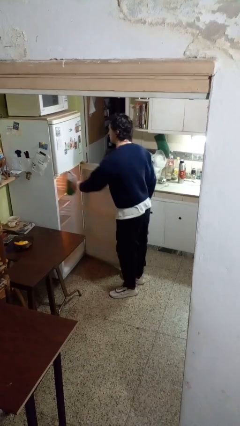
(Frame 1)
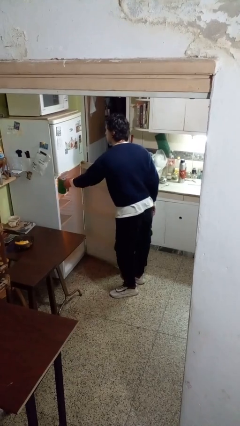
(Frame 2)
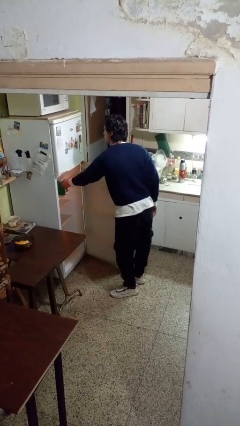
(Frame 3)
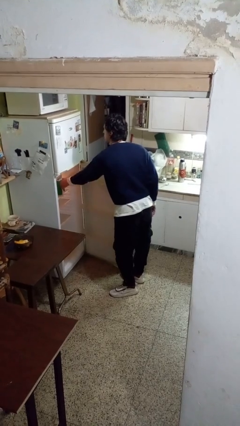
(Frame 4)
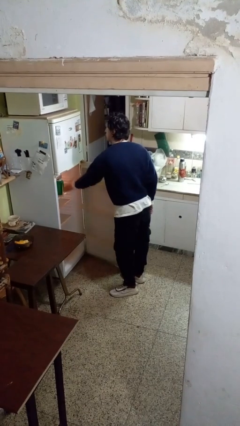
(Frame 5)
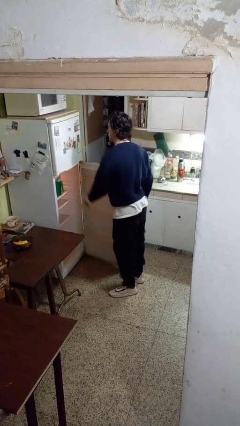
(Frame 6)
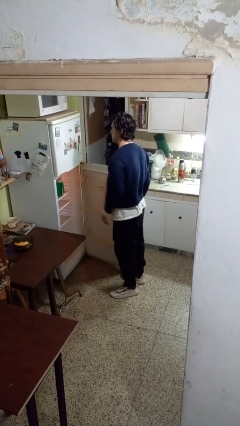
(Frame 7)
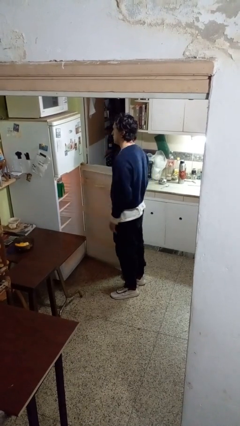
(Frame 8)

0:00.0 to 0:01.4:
person puts object into refrigerator

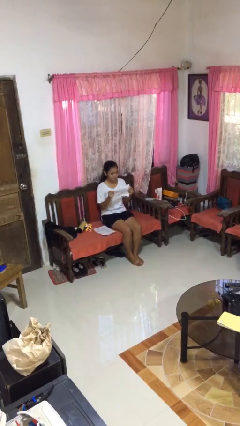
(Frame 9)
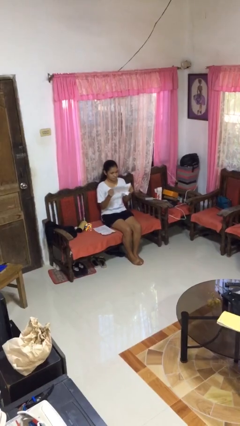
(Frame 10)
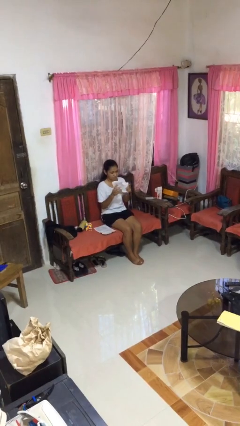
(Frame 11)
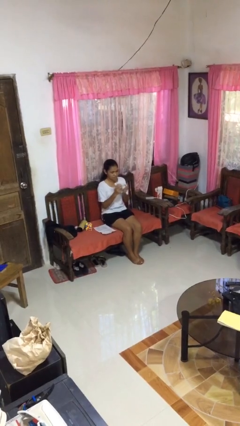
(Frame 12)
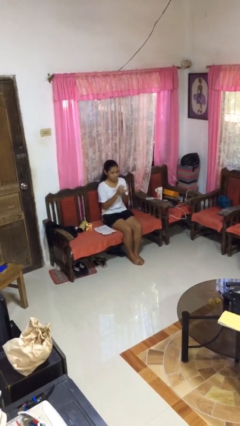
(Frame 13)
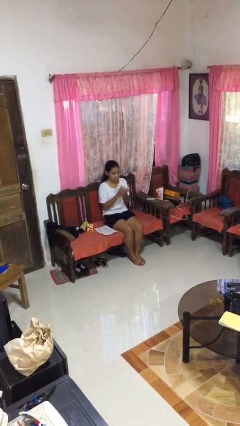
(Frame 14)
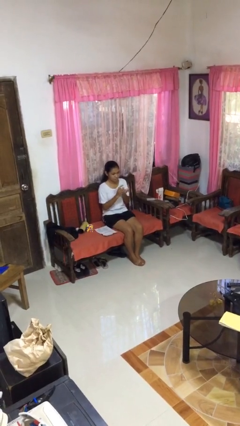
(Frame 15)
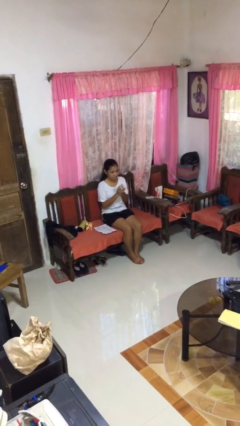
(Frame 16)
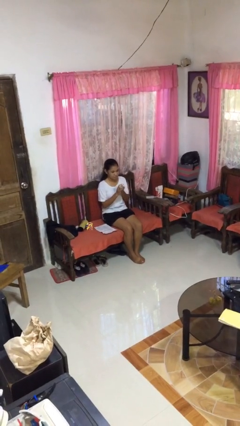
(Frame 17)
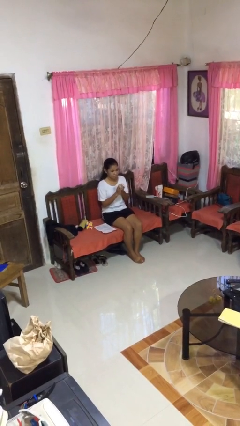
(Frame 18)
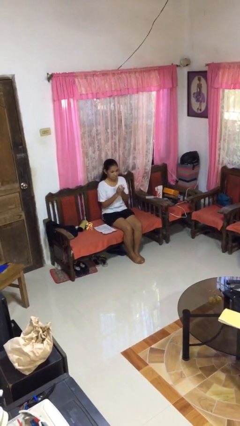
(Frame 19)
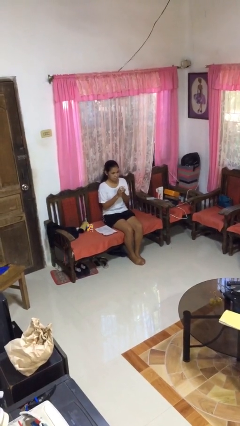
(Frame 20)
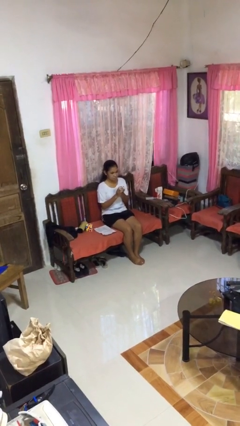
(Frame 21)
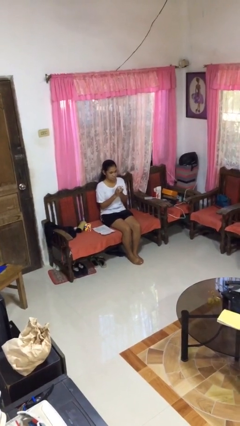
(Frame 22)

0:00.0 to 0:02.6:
person crumples paper

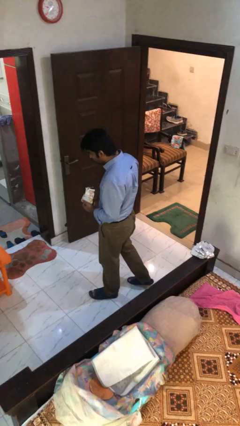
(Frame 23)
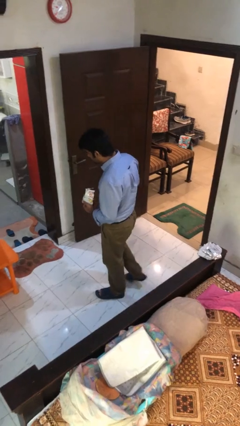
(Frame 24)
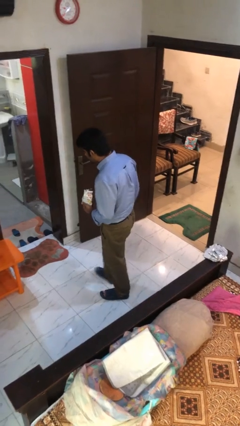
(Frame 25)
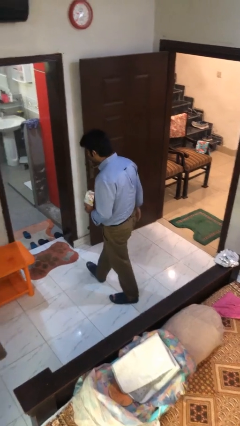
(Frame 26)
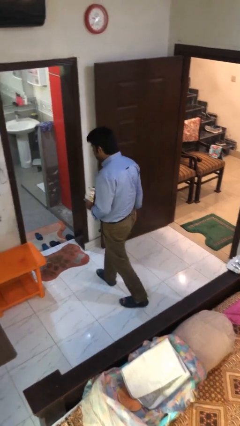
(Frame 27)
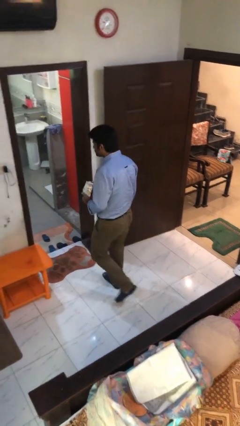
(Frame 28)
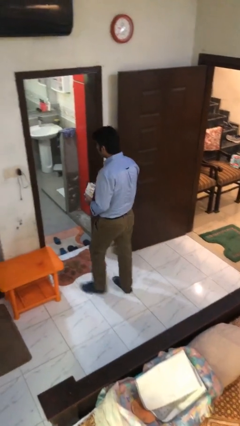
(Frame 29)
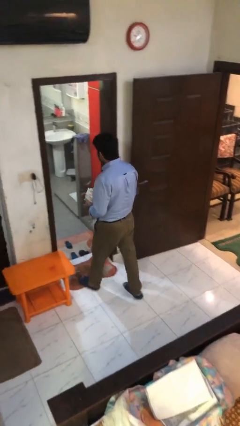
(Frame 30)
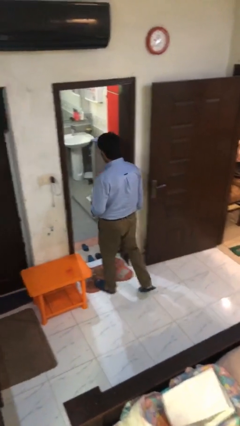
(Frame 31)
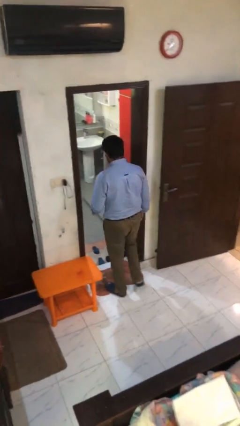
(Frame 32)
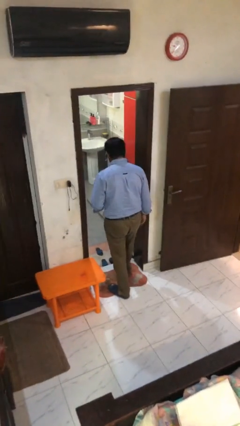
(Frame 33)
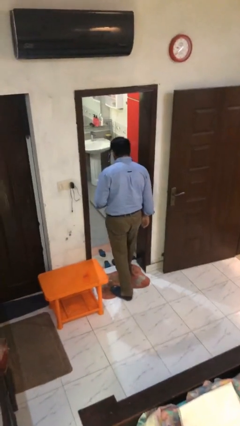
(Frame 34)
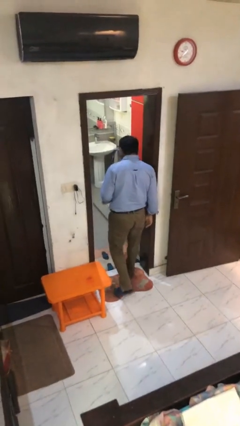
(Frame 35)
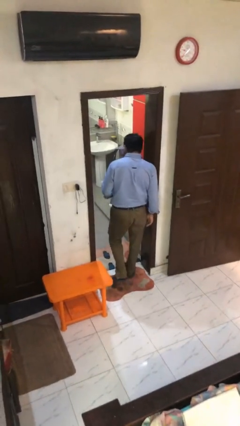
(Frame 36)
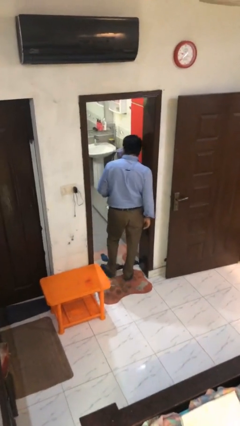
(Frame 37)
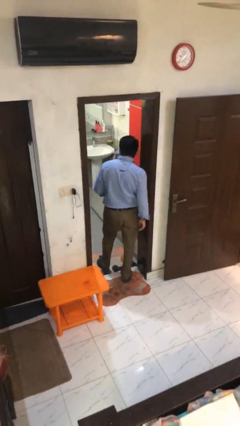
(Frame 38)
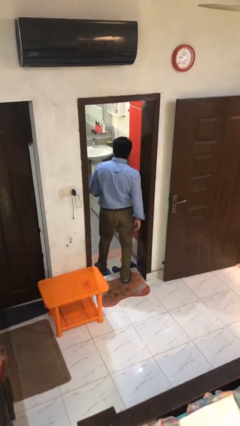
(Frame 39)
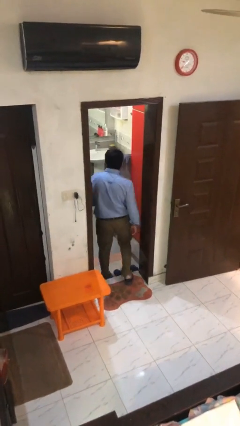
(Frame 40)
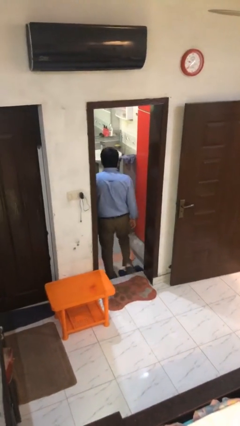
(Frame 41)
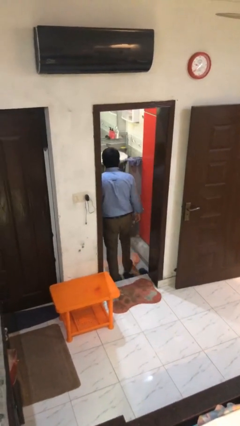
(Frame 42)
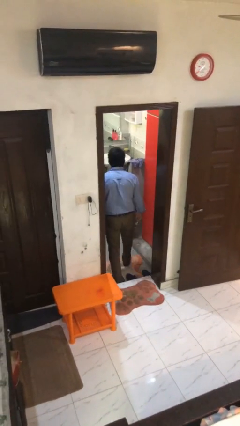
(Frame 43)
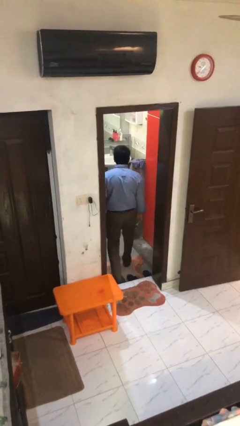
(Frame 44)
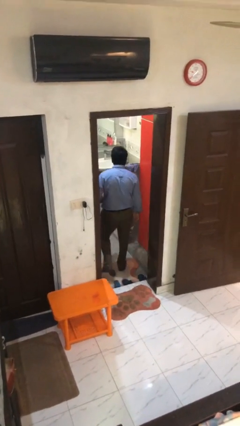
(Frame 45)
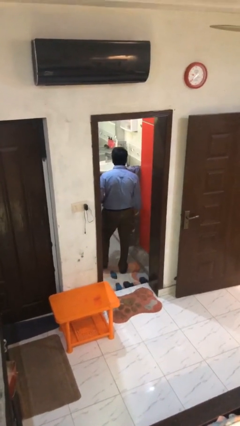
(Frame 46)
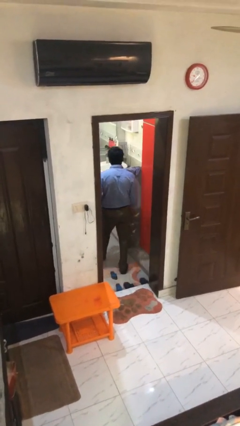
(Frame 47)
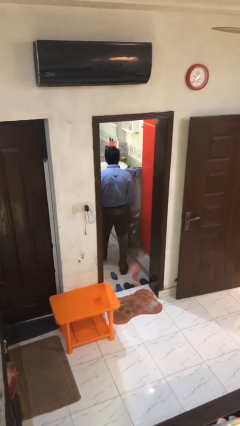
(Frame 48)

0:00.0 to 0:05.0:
person exits scene through structure

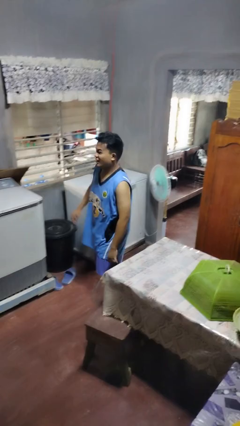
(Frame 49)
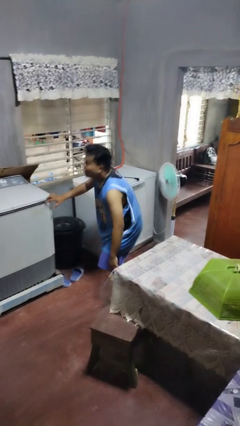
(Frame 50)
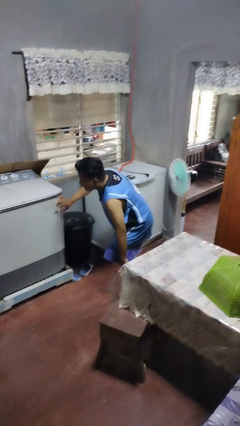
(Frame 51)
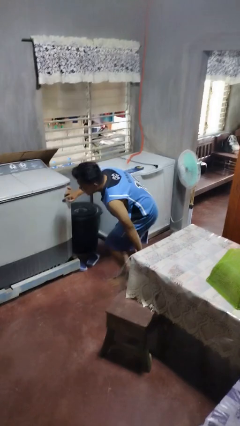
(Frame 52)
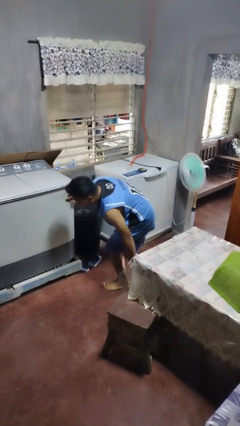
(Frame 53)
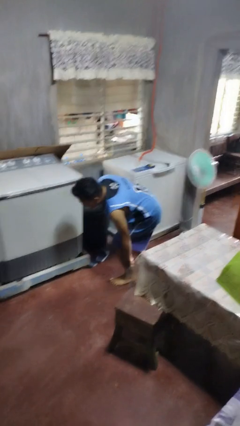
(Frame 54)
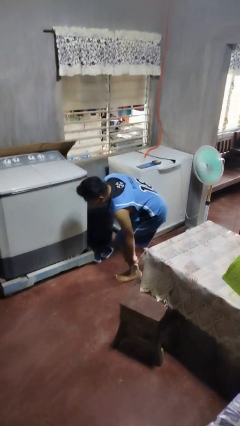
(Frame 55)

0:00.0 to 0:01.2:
person trips on object on floor

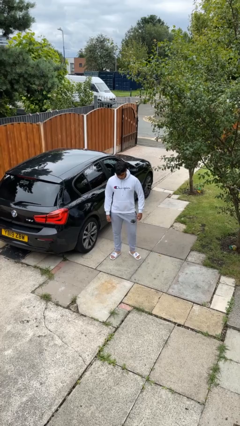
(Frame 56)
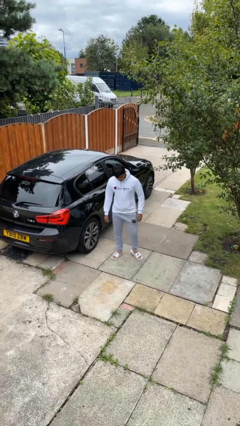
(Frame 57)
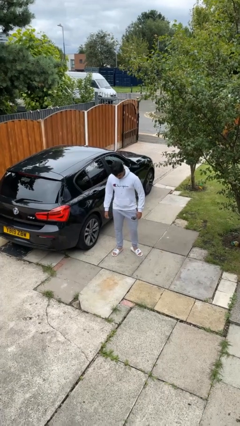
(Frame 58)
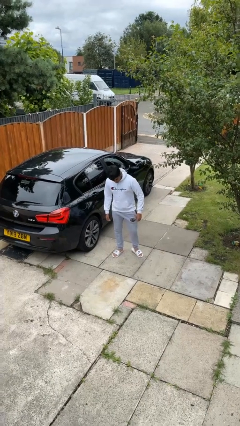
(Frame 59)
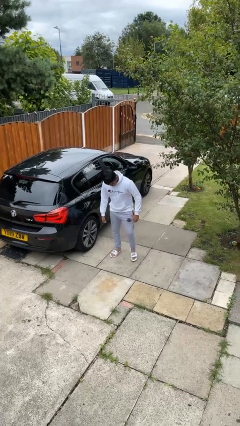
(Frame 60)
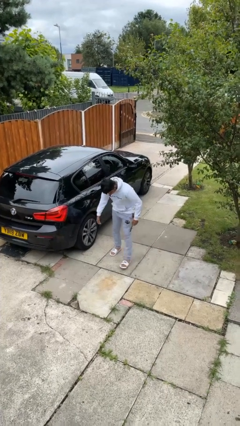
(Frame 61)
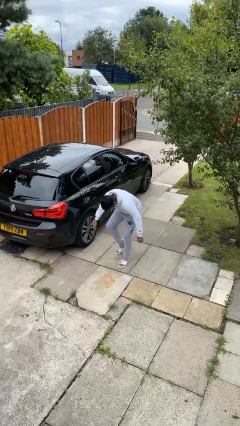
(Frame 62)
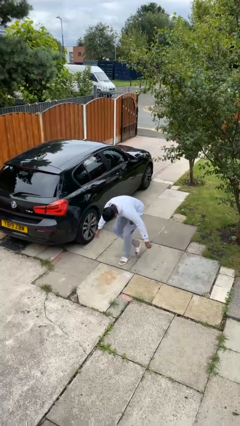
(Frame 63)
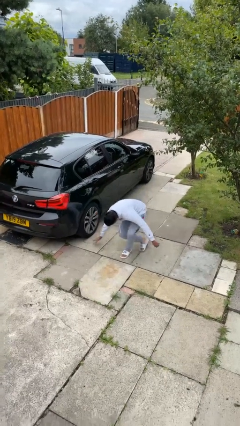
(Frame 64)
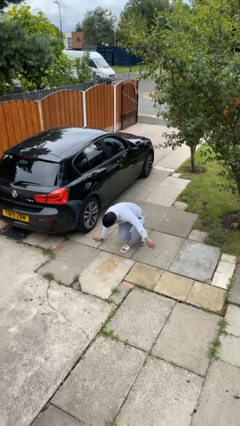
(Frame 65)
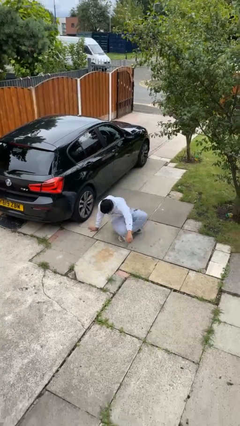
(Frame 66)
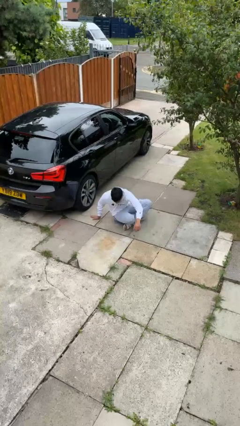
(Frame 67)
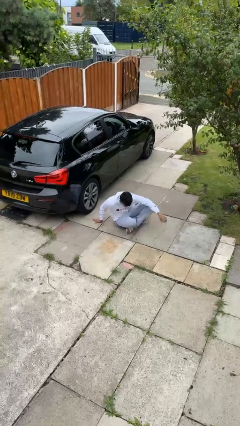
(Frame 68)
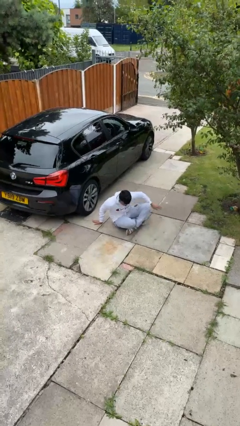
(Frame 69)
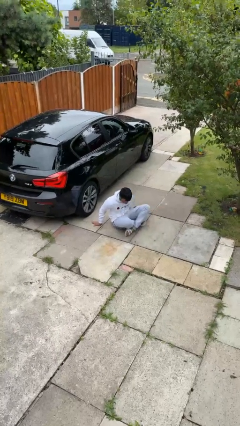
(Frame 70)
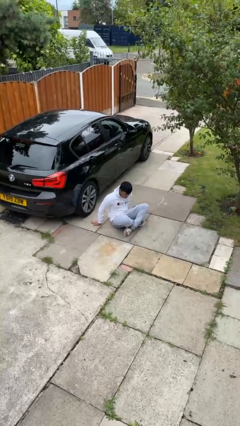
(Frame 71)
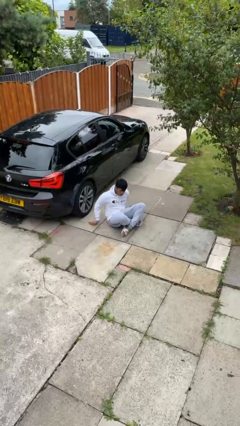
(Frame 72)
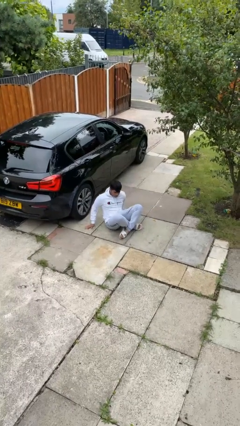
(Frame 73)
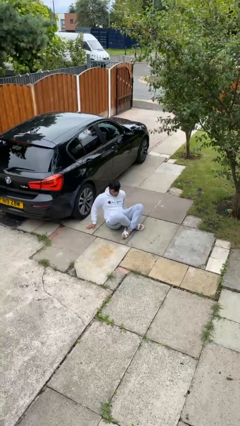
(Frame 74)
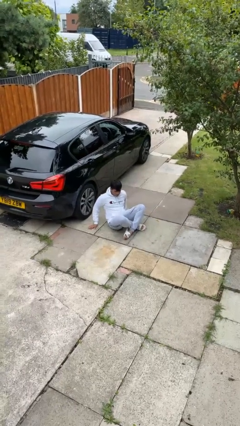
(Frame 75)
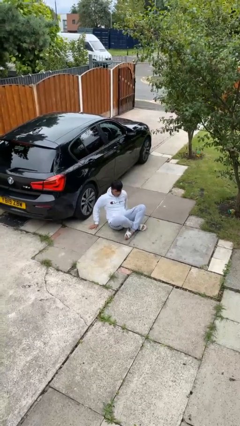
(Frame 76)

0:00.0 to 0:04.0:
person sits crisscross

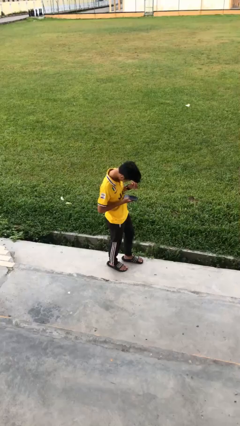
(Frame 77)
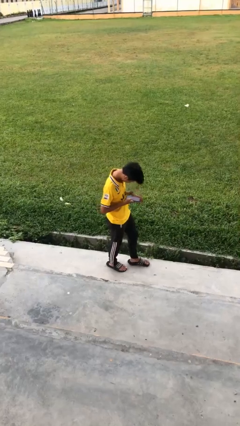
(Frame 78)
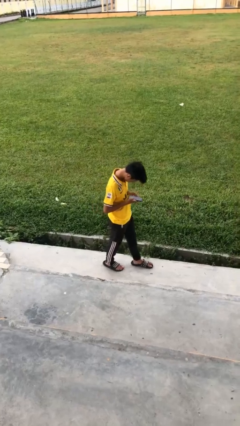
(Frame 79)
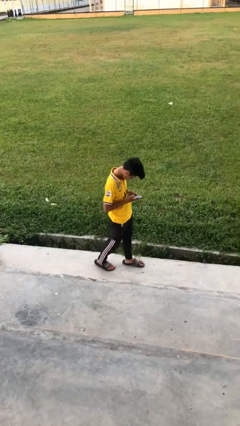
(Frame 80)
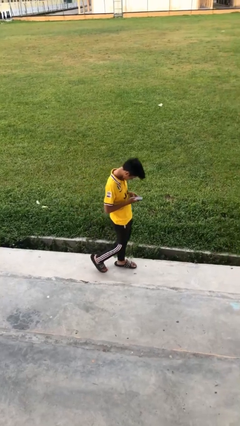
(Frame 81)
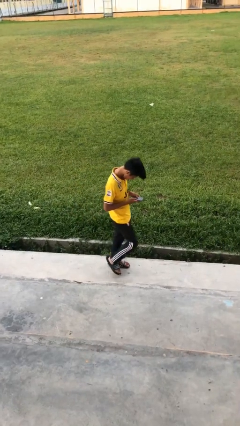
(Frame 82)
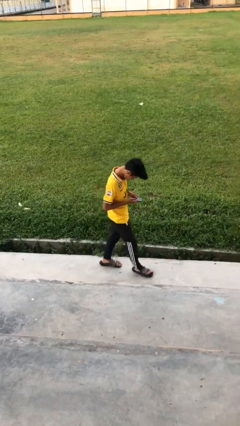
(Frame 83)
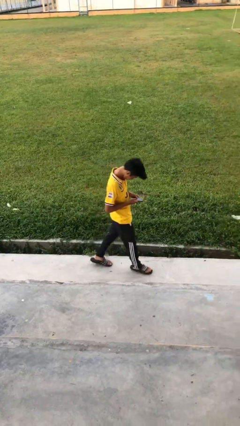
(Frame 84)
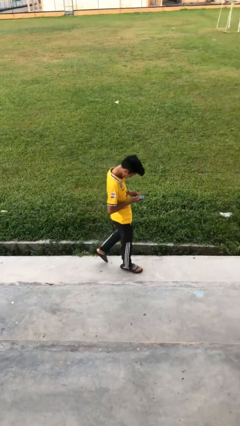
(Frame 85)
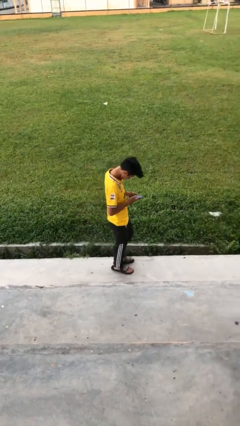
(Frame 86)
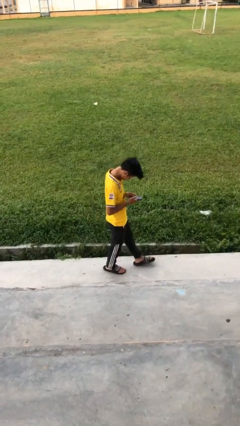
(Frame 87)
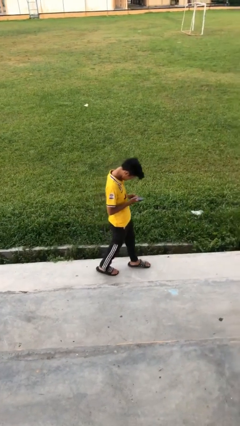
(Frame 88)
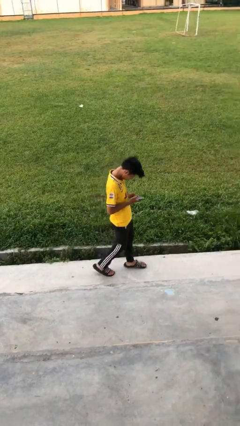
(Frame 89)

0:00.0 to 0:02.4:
person texts on phone

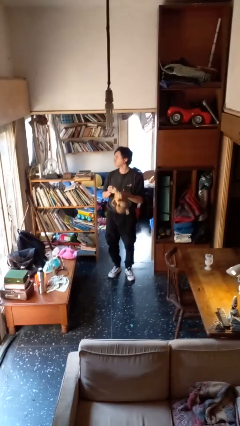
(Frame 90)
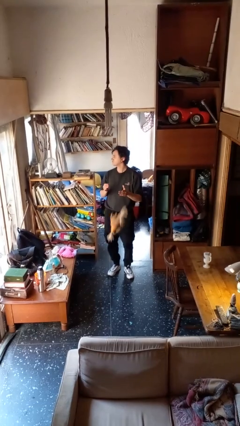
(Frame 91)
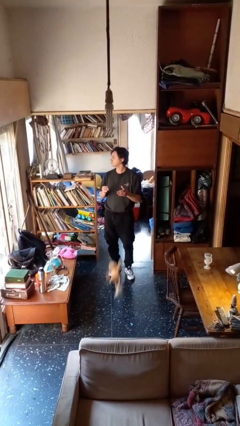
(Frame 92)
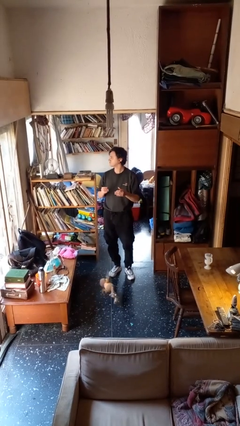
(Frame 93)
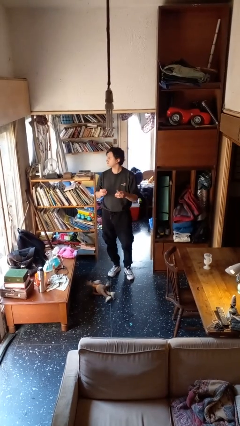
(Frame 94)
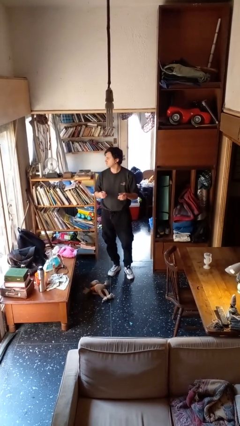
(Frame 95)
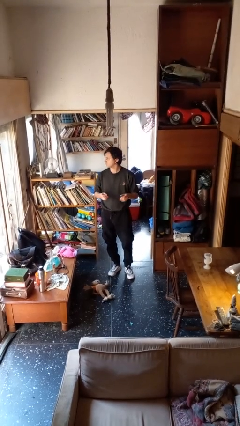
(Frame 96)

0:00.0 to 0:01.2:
person drops object
